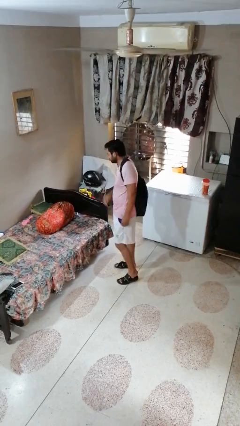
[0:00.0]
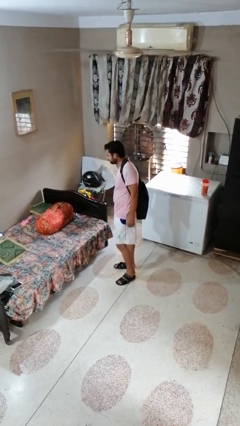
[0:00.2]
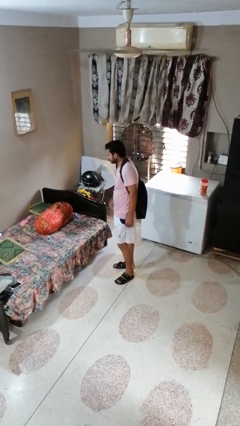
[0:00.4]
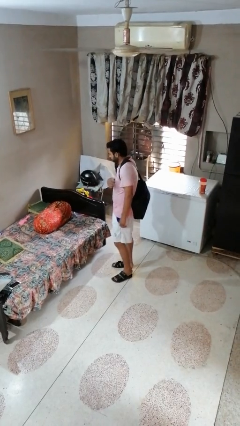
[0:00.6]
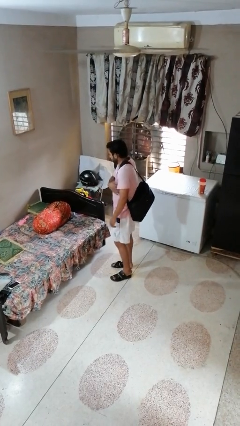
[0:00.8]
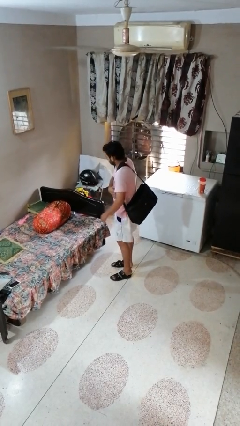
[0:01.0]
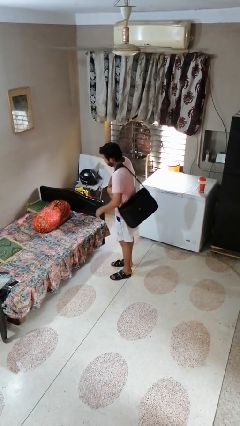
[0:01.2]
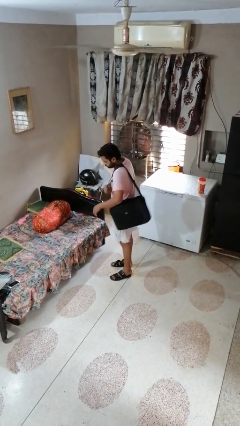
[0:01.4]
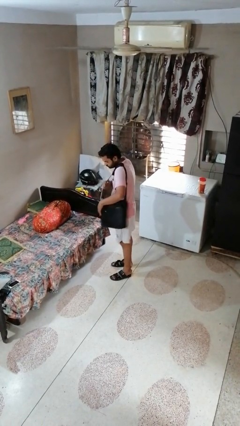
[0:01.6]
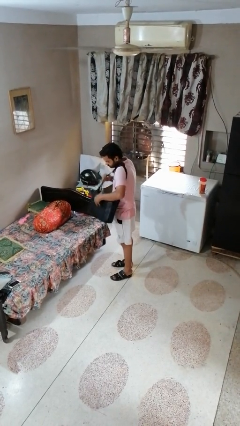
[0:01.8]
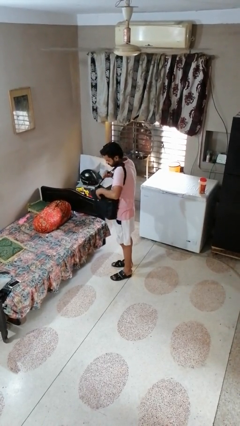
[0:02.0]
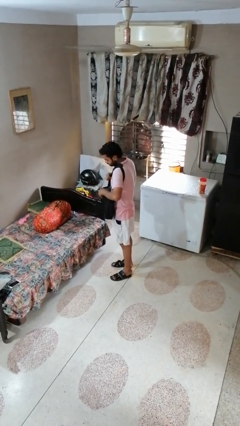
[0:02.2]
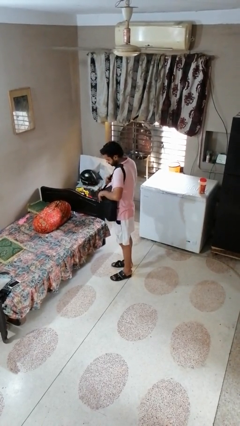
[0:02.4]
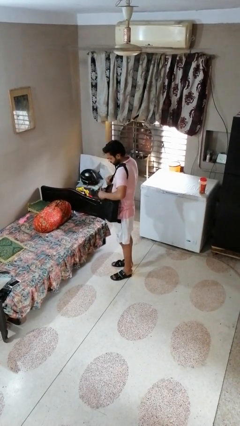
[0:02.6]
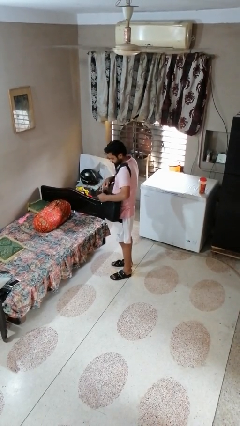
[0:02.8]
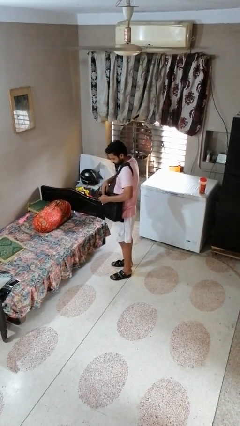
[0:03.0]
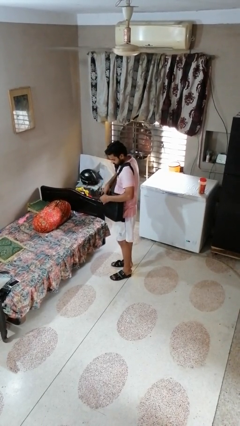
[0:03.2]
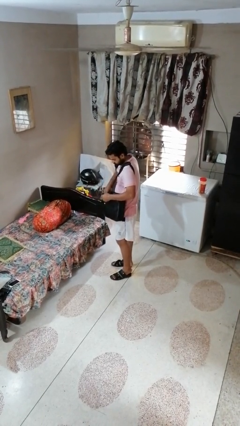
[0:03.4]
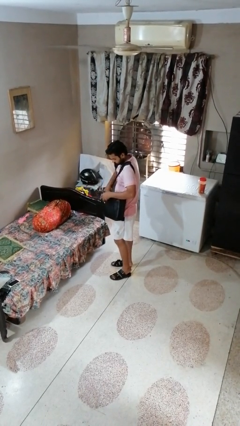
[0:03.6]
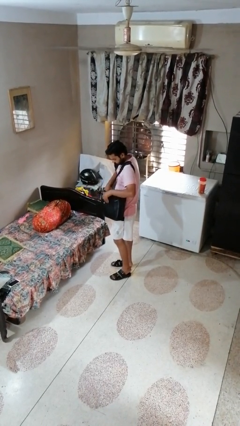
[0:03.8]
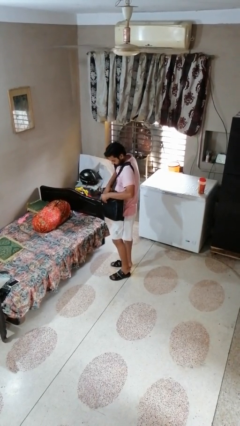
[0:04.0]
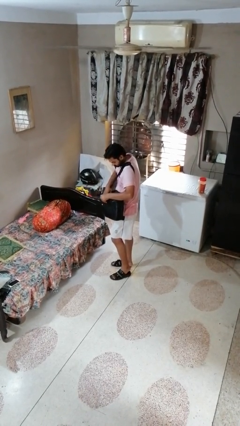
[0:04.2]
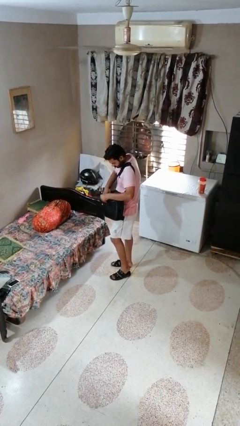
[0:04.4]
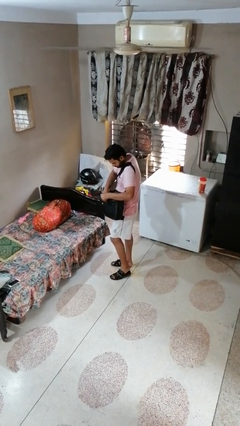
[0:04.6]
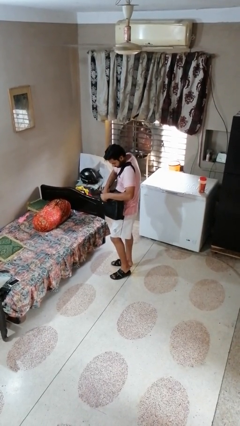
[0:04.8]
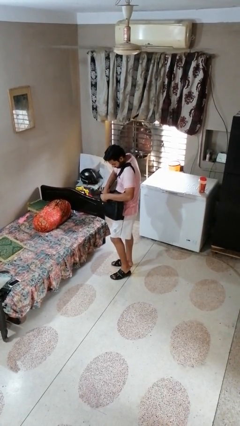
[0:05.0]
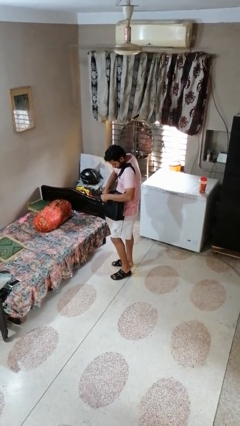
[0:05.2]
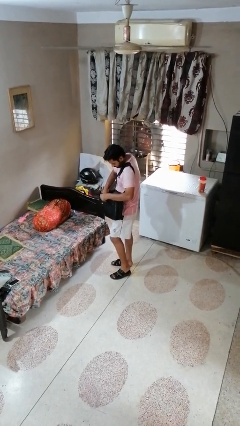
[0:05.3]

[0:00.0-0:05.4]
person searches in backpack

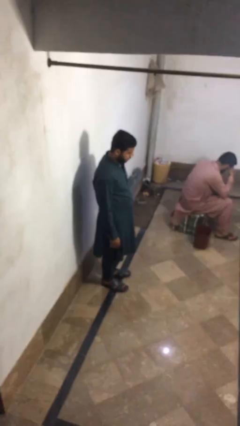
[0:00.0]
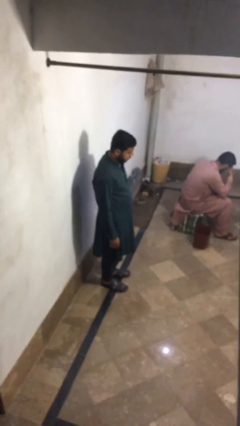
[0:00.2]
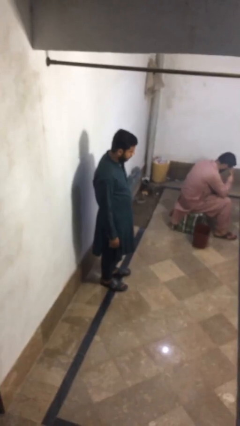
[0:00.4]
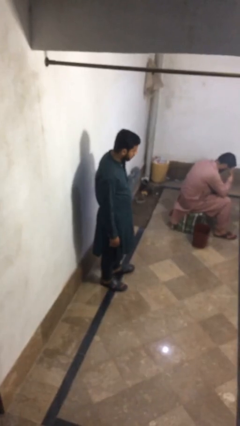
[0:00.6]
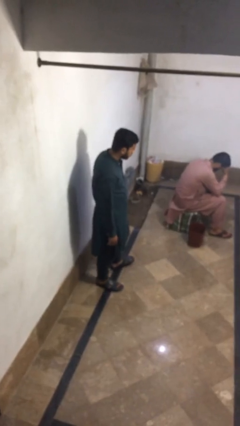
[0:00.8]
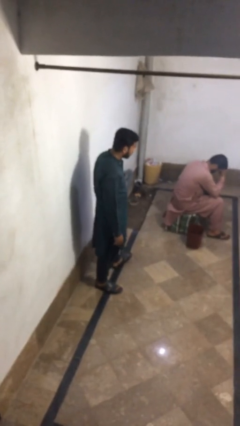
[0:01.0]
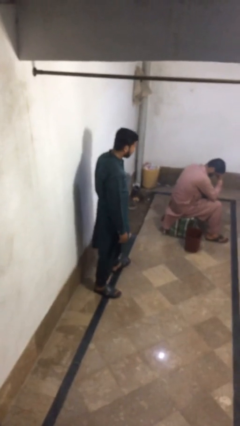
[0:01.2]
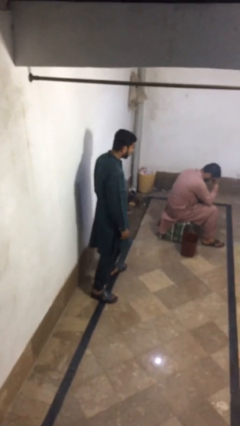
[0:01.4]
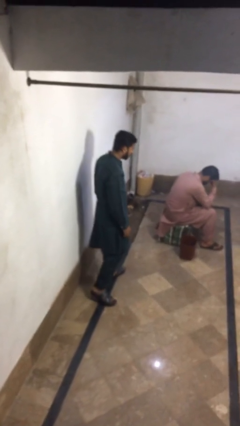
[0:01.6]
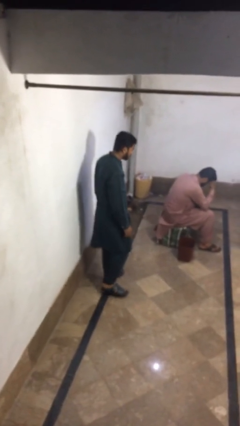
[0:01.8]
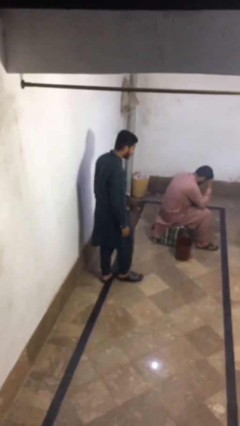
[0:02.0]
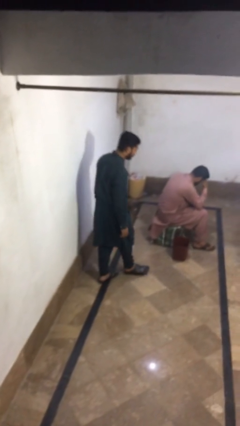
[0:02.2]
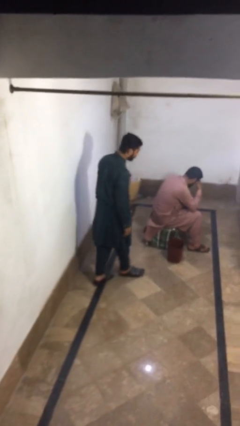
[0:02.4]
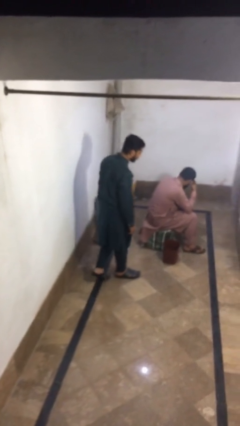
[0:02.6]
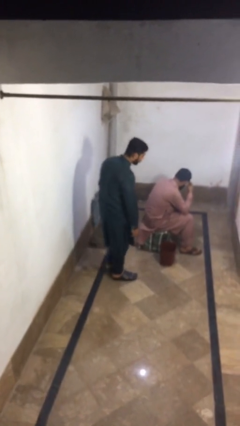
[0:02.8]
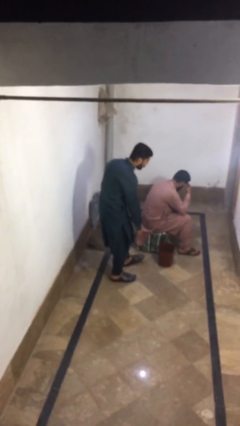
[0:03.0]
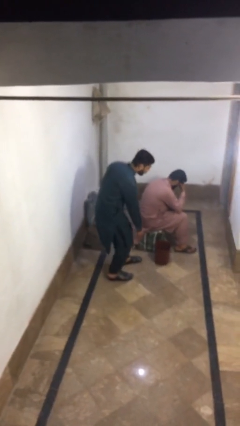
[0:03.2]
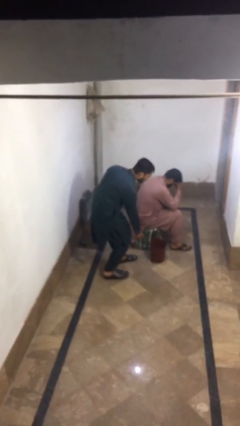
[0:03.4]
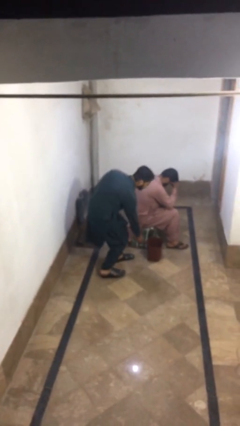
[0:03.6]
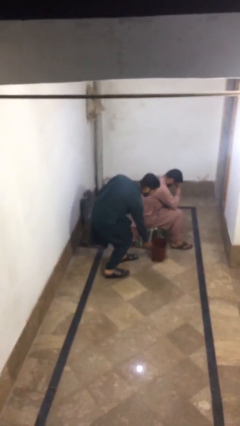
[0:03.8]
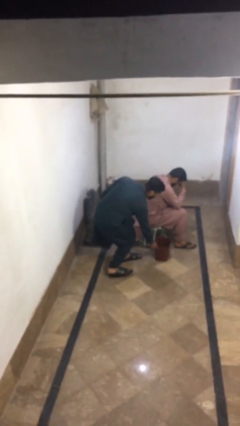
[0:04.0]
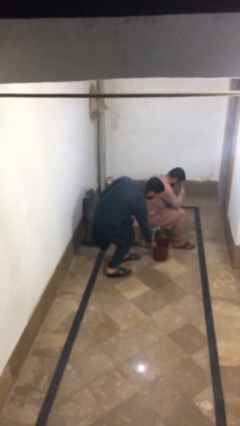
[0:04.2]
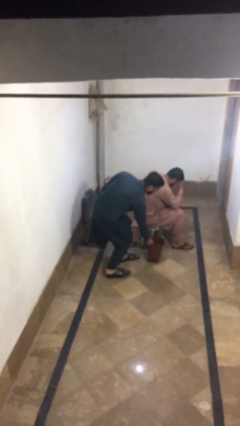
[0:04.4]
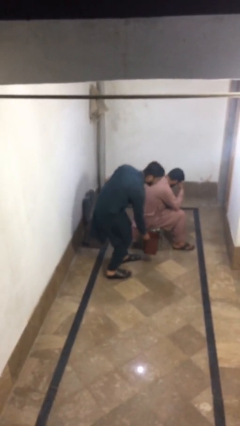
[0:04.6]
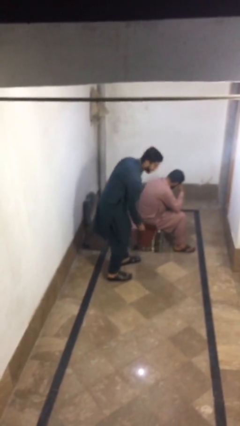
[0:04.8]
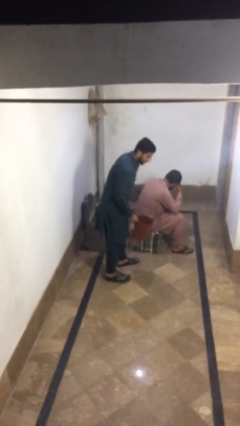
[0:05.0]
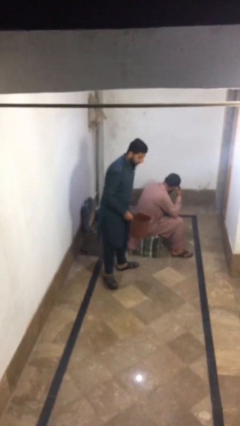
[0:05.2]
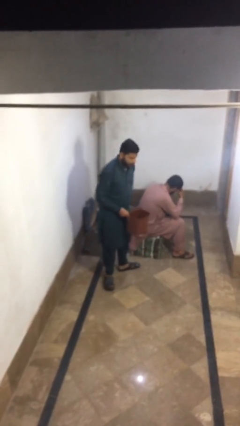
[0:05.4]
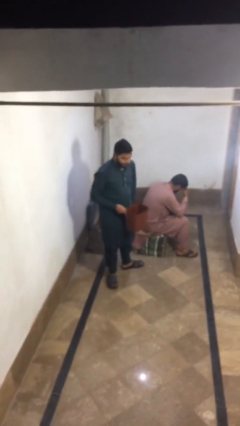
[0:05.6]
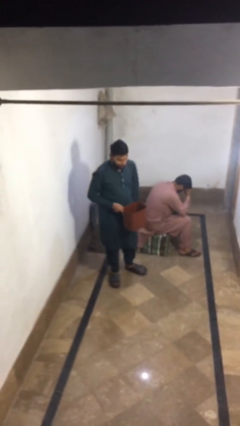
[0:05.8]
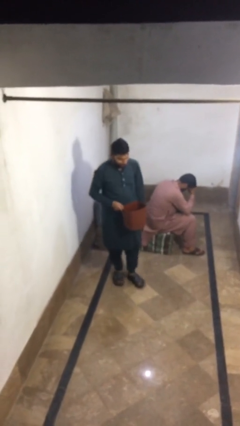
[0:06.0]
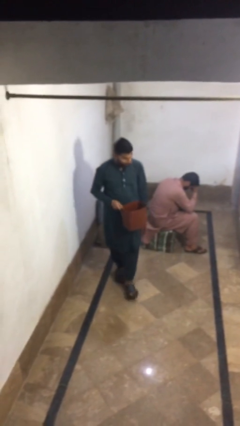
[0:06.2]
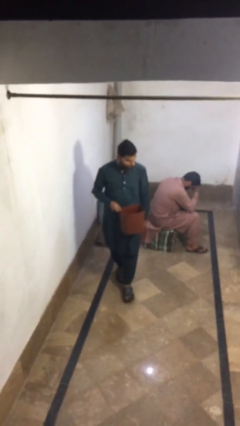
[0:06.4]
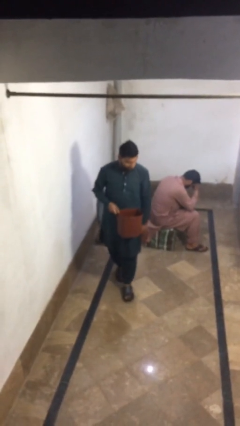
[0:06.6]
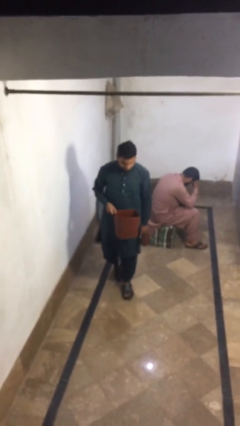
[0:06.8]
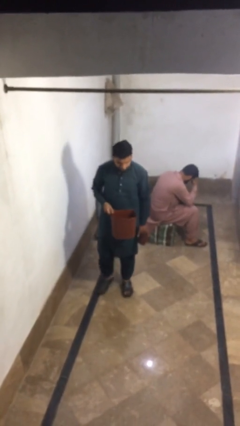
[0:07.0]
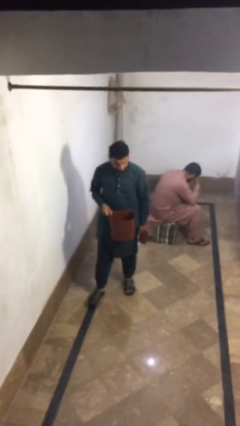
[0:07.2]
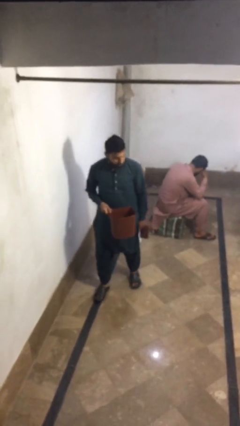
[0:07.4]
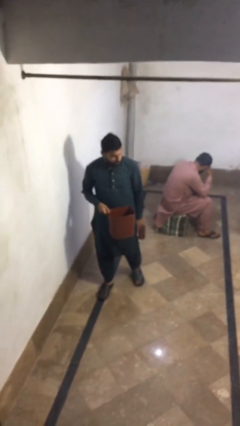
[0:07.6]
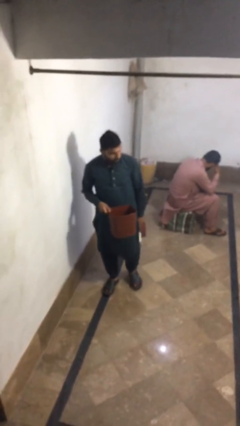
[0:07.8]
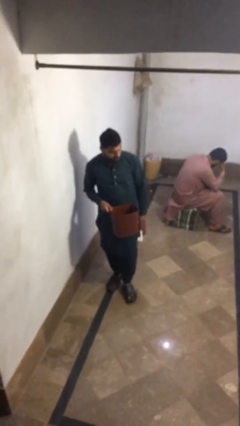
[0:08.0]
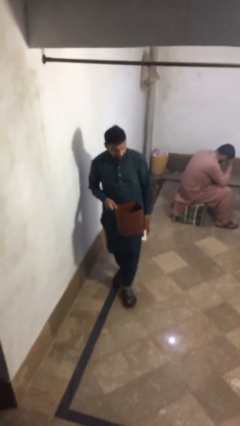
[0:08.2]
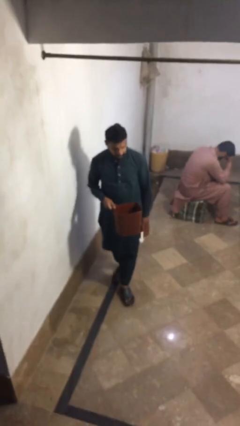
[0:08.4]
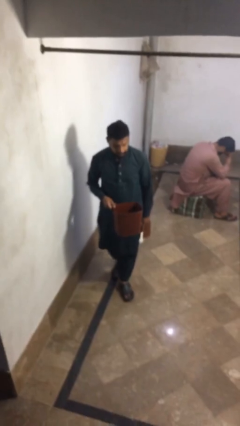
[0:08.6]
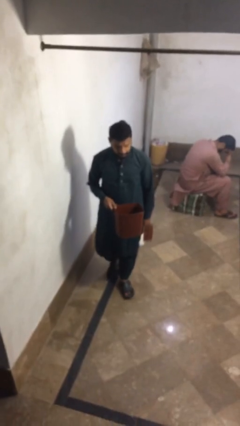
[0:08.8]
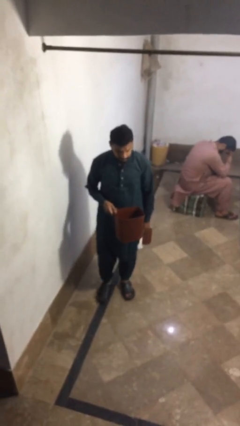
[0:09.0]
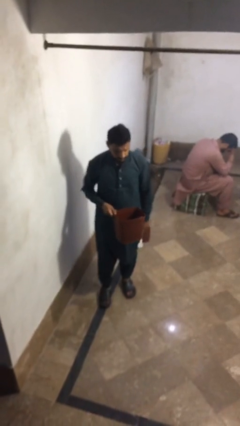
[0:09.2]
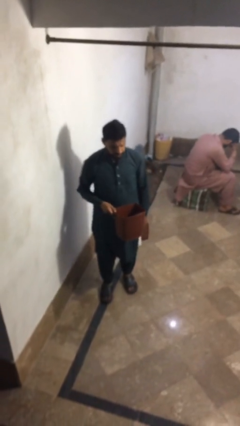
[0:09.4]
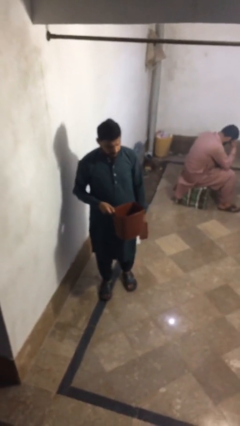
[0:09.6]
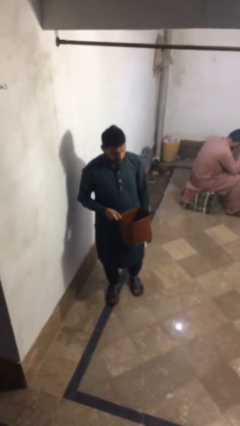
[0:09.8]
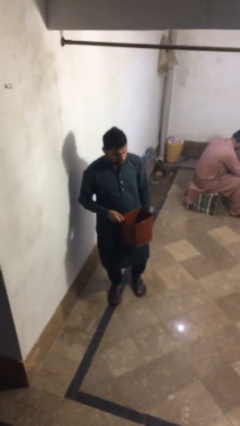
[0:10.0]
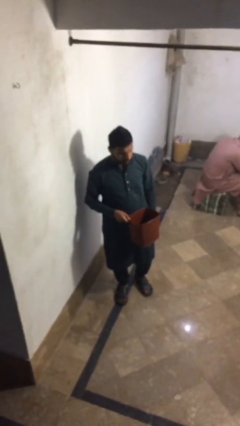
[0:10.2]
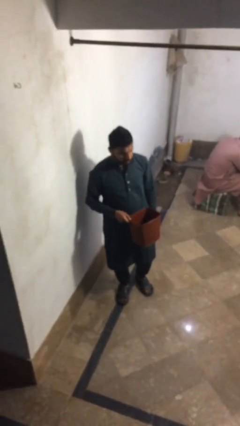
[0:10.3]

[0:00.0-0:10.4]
person steals object from person

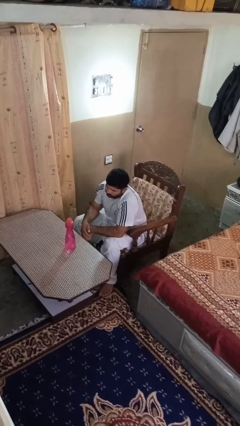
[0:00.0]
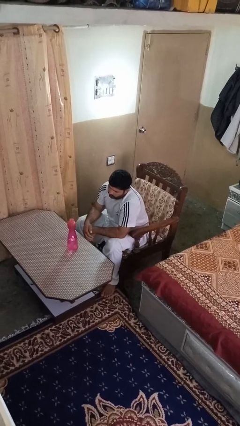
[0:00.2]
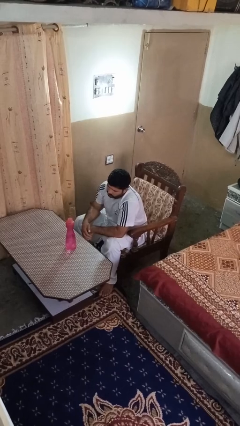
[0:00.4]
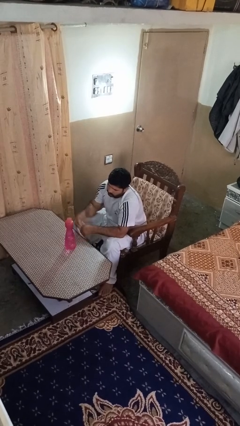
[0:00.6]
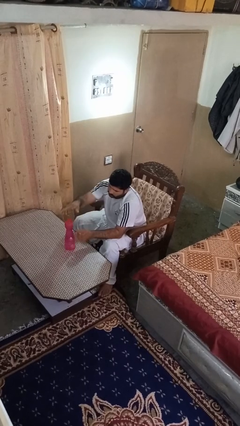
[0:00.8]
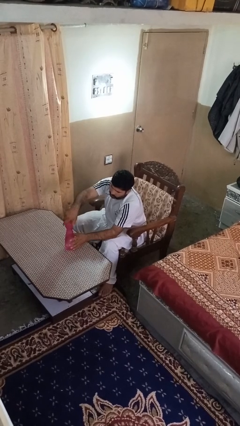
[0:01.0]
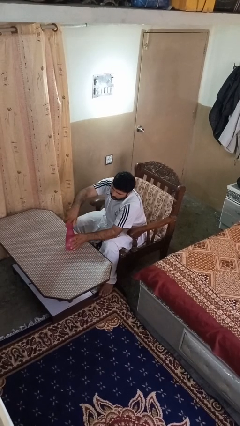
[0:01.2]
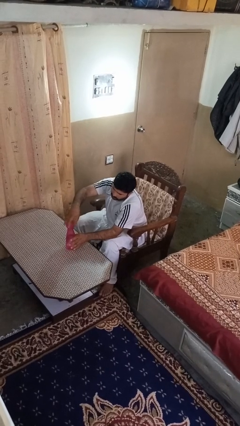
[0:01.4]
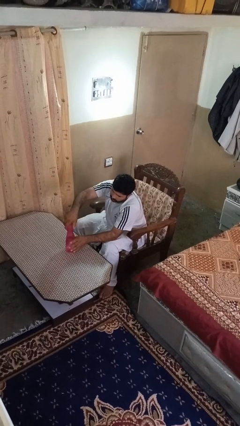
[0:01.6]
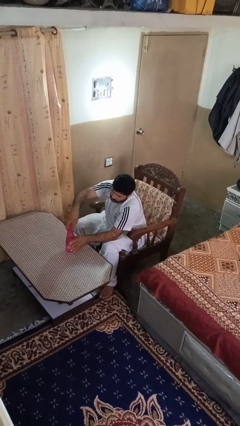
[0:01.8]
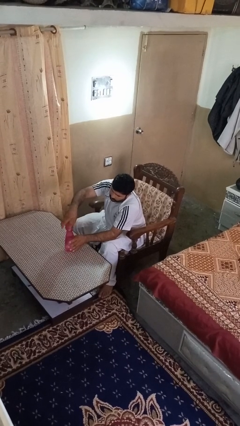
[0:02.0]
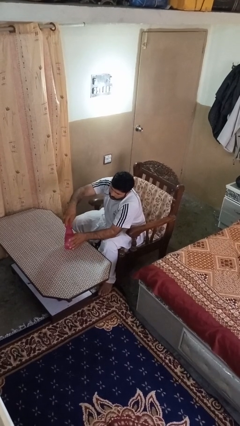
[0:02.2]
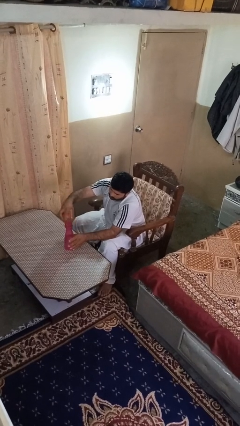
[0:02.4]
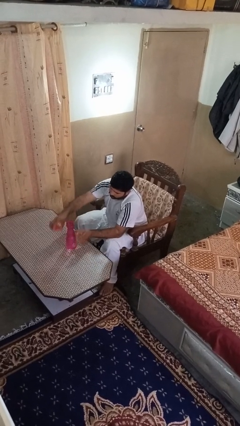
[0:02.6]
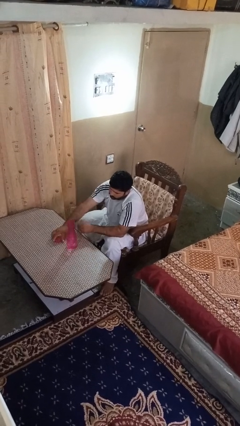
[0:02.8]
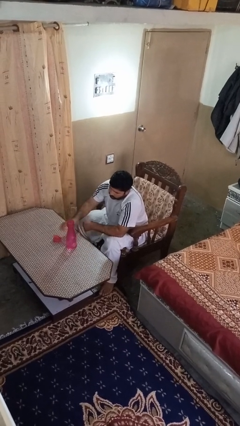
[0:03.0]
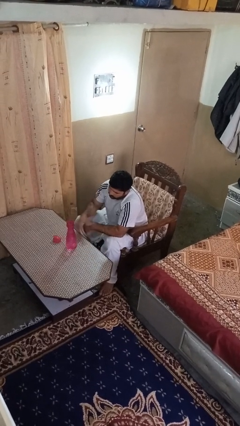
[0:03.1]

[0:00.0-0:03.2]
person unscrews lid from bottle
